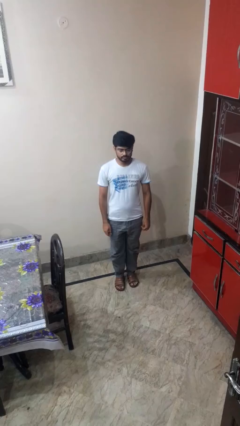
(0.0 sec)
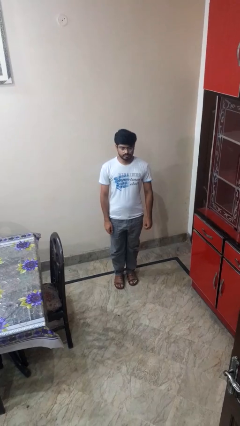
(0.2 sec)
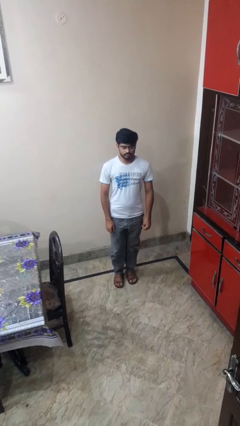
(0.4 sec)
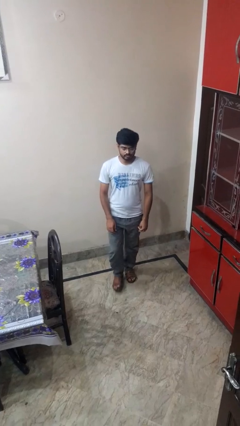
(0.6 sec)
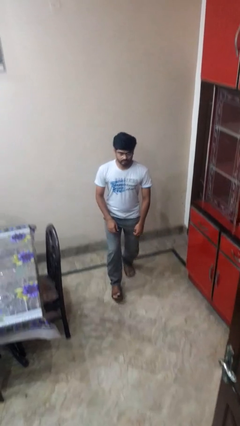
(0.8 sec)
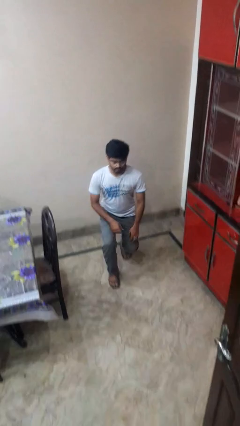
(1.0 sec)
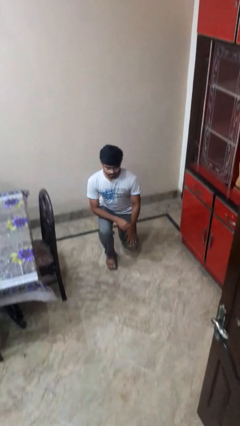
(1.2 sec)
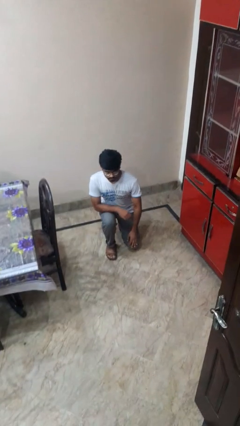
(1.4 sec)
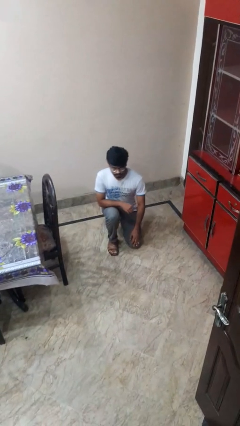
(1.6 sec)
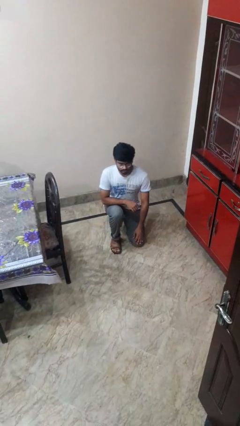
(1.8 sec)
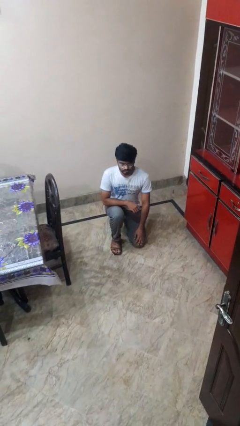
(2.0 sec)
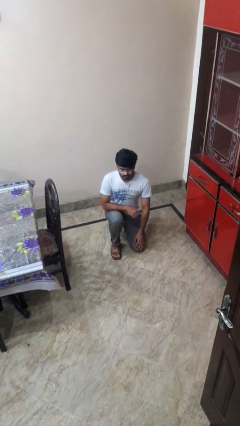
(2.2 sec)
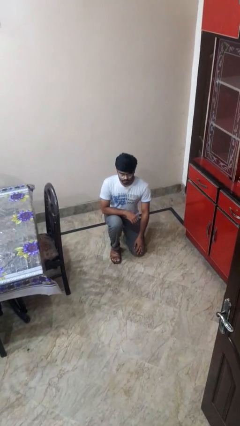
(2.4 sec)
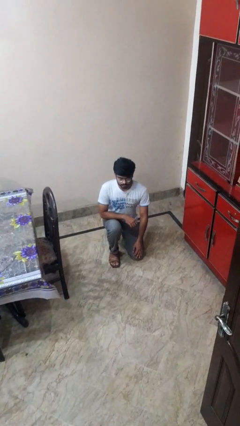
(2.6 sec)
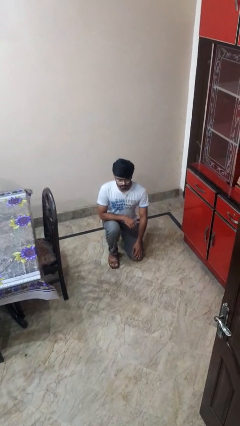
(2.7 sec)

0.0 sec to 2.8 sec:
person kneels

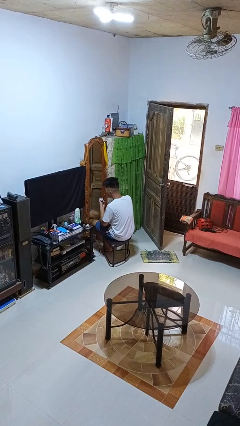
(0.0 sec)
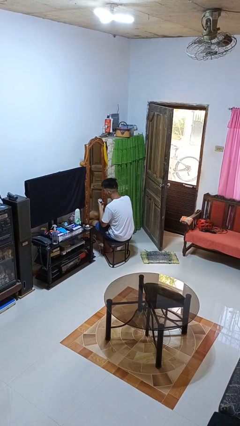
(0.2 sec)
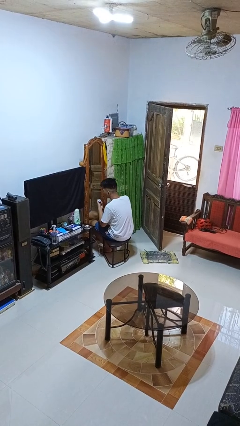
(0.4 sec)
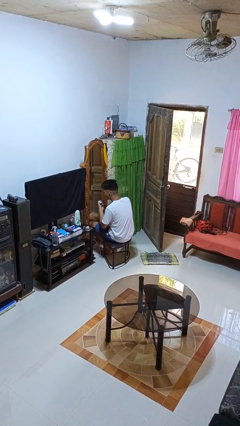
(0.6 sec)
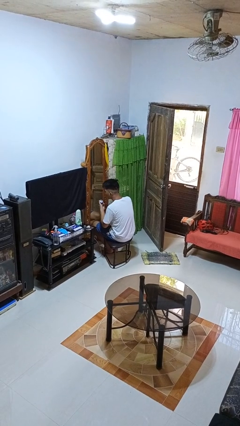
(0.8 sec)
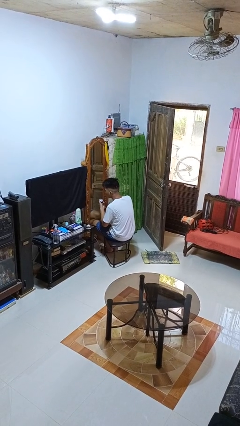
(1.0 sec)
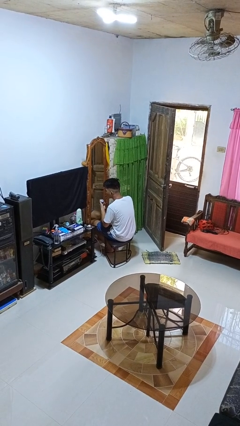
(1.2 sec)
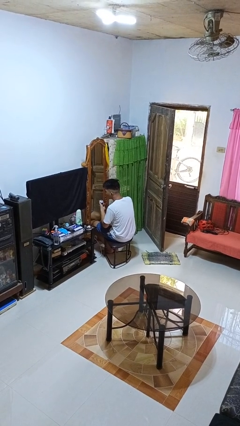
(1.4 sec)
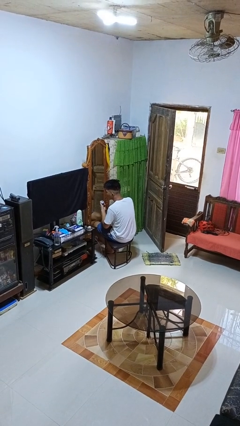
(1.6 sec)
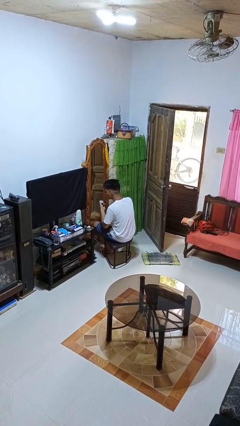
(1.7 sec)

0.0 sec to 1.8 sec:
person applies eye makeup

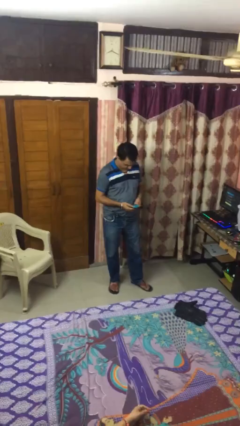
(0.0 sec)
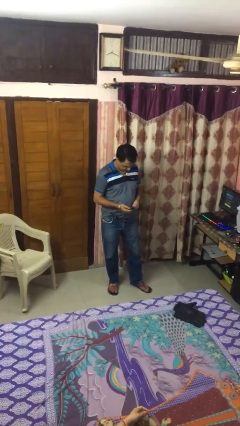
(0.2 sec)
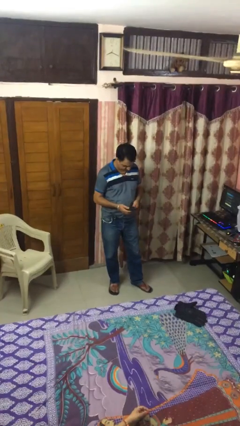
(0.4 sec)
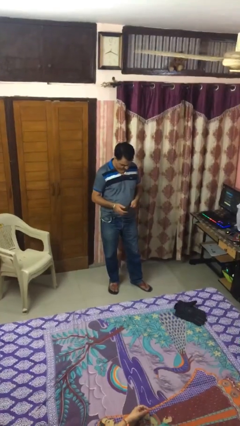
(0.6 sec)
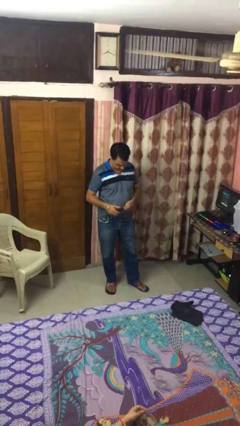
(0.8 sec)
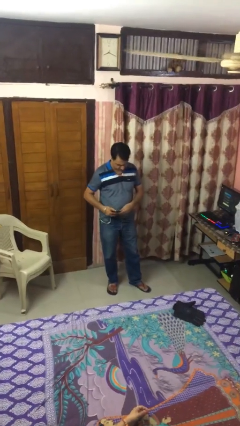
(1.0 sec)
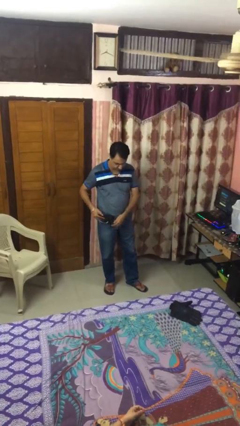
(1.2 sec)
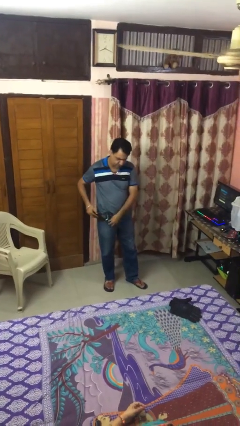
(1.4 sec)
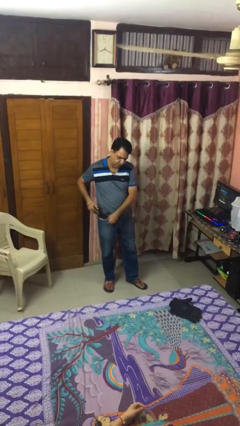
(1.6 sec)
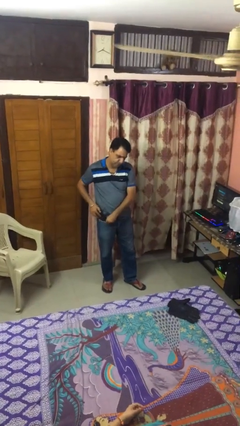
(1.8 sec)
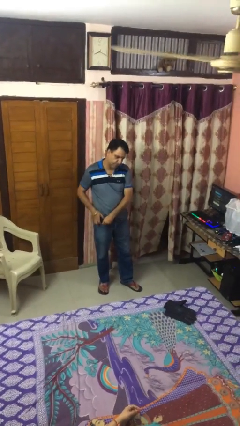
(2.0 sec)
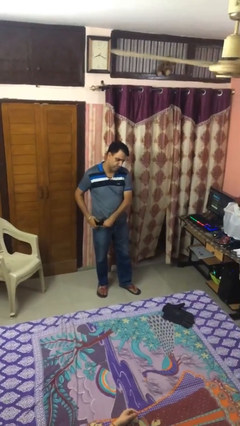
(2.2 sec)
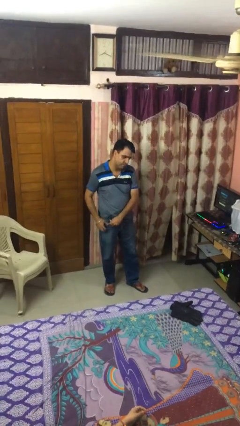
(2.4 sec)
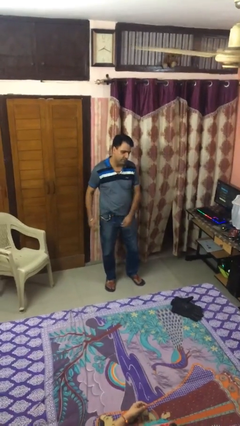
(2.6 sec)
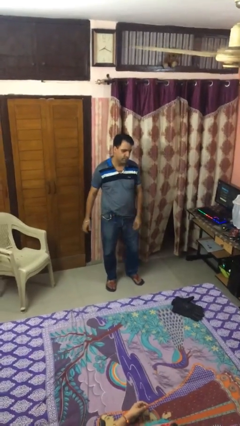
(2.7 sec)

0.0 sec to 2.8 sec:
person puts phone into pocket

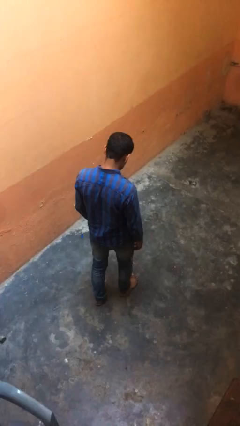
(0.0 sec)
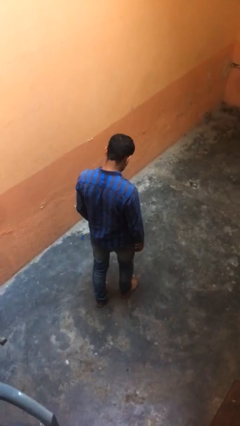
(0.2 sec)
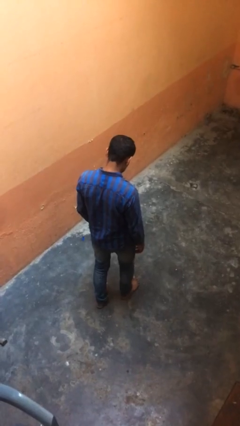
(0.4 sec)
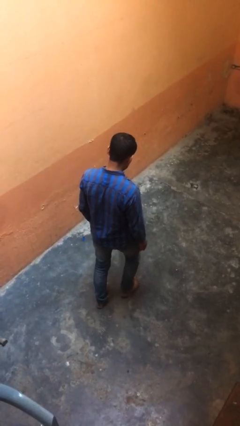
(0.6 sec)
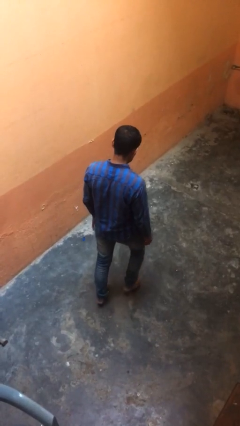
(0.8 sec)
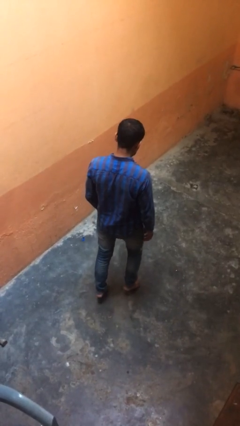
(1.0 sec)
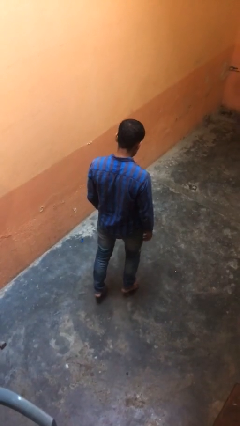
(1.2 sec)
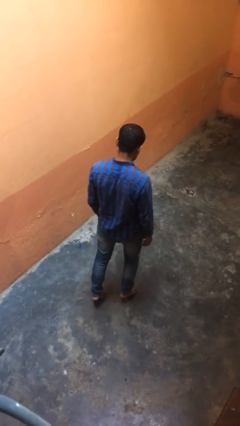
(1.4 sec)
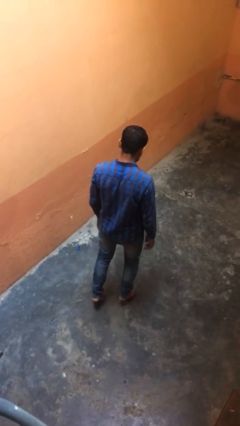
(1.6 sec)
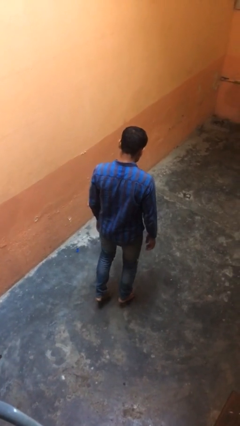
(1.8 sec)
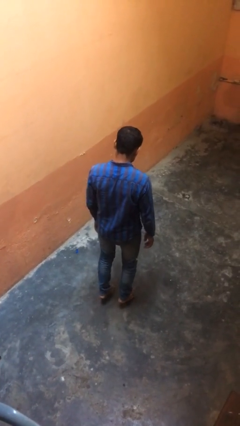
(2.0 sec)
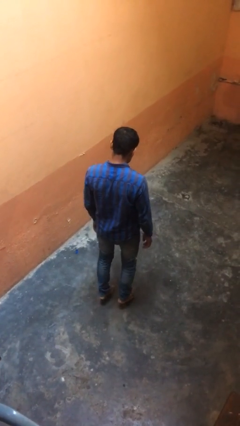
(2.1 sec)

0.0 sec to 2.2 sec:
person walks tiptoe

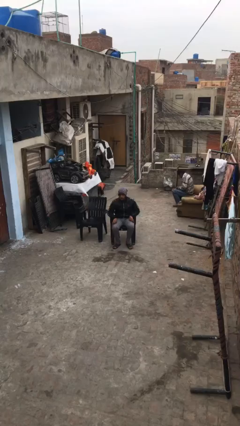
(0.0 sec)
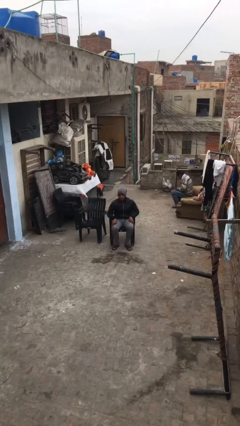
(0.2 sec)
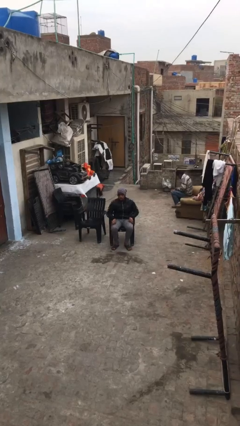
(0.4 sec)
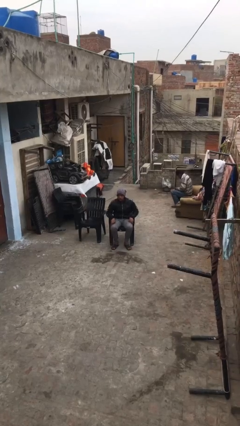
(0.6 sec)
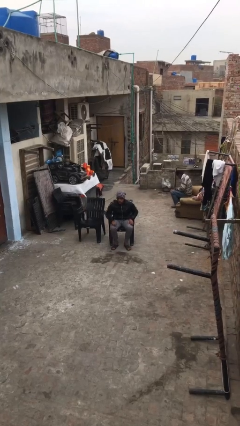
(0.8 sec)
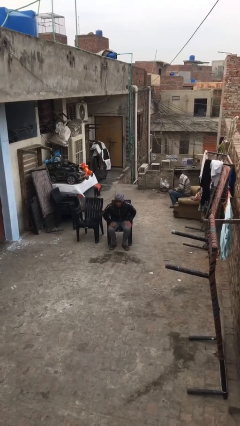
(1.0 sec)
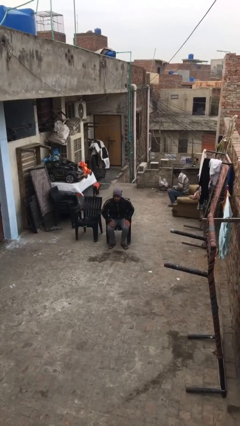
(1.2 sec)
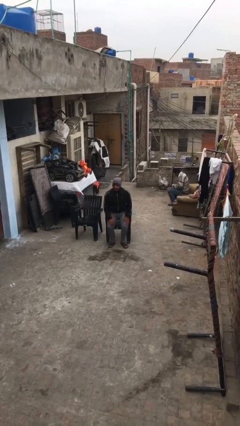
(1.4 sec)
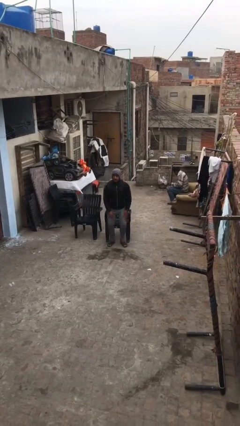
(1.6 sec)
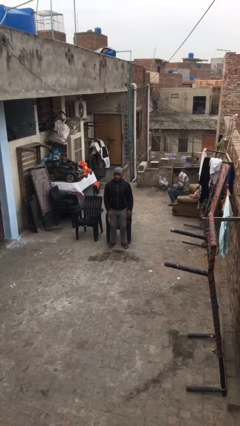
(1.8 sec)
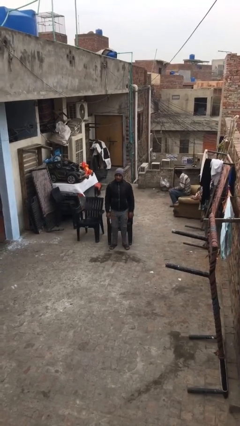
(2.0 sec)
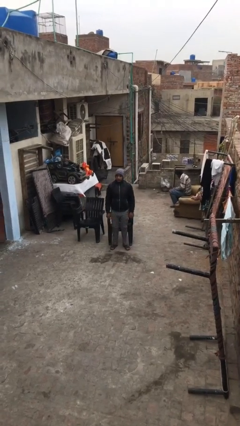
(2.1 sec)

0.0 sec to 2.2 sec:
person stands up

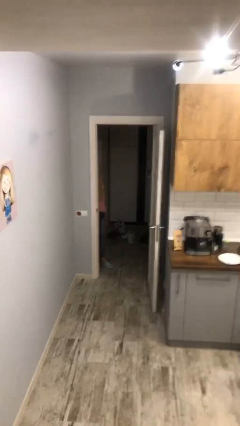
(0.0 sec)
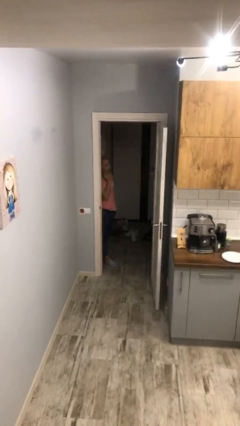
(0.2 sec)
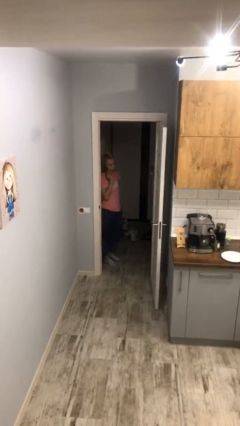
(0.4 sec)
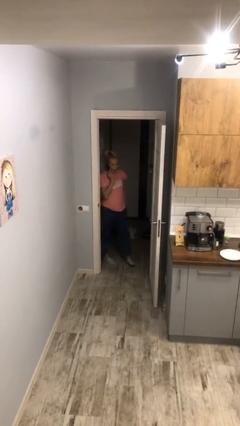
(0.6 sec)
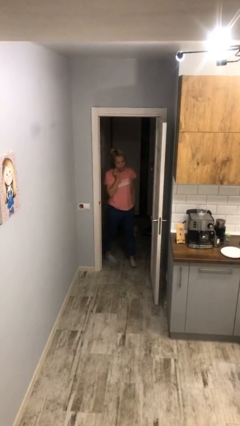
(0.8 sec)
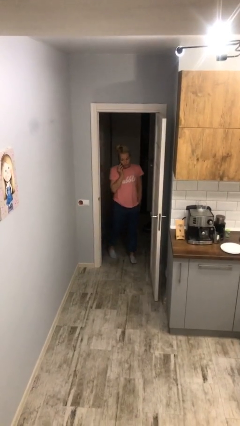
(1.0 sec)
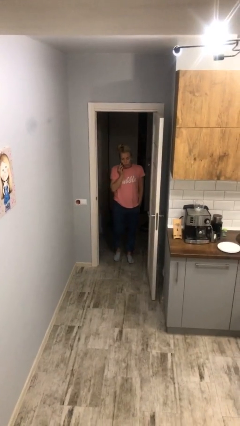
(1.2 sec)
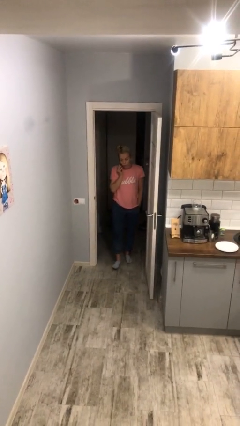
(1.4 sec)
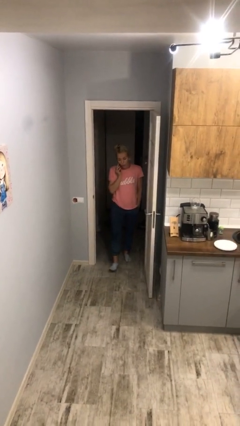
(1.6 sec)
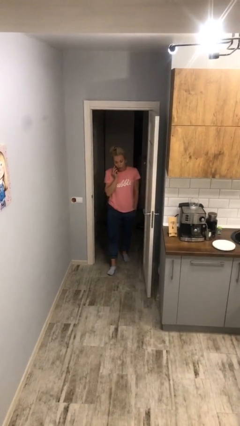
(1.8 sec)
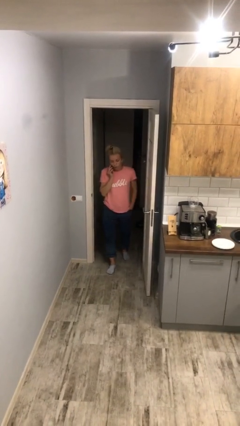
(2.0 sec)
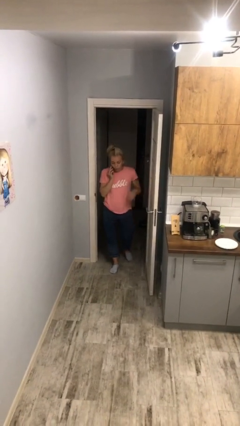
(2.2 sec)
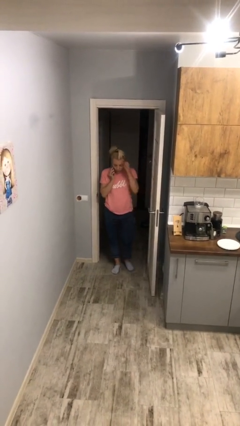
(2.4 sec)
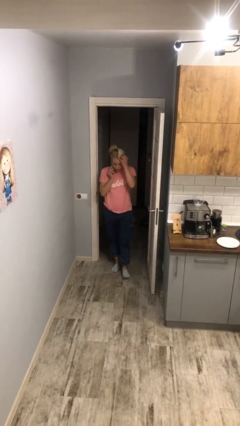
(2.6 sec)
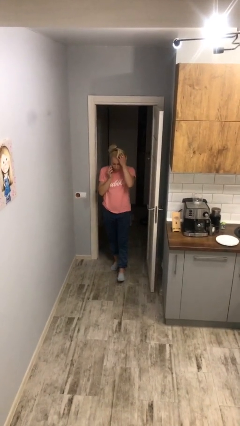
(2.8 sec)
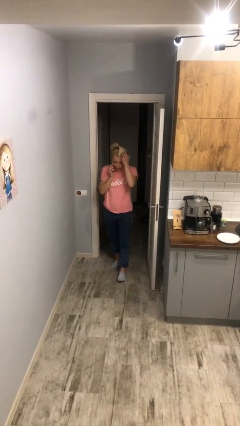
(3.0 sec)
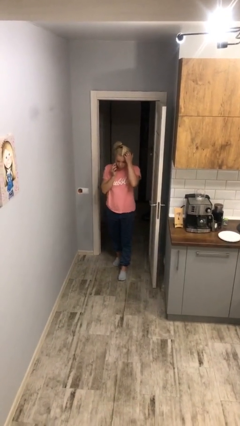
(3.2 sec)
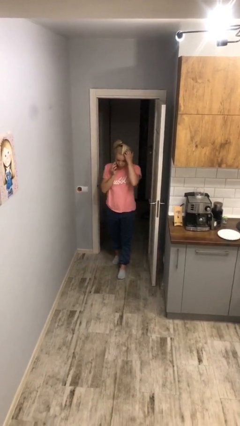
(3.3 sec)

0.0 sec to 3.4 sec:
person enters scene through structure

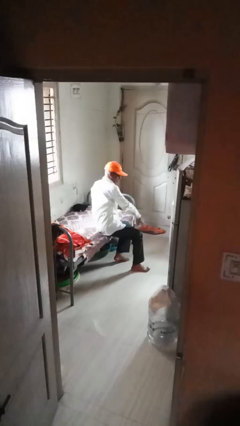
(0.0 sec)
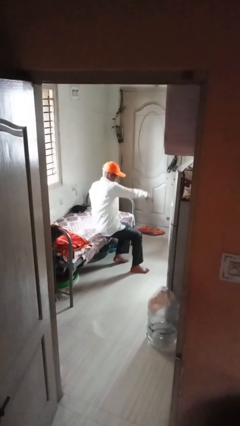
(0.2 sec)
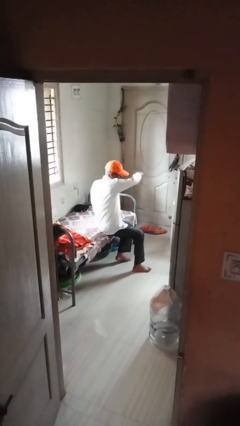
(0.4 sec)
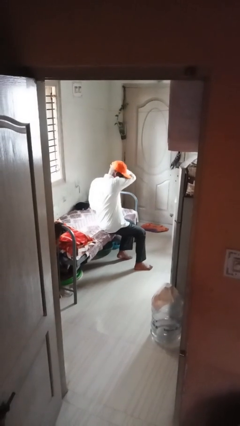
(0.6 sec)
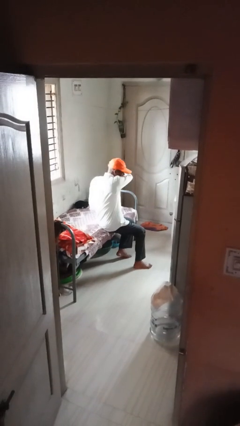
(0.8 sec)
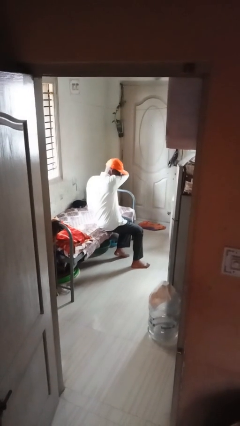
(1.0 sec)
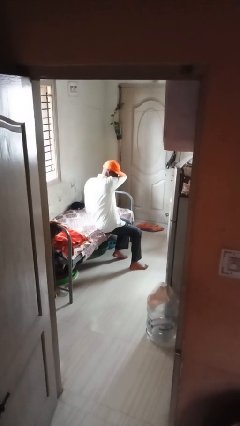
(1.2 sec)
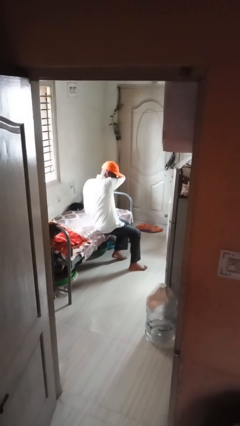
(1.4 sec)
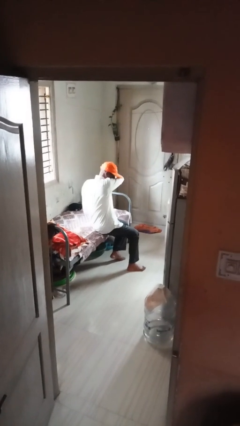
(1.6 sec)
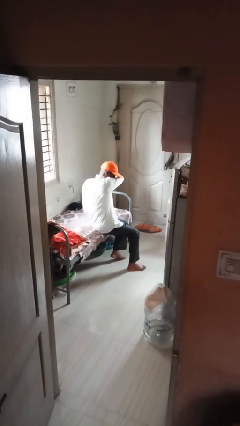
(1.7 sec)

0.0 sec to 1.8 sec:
person sneezes into arm
